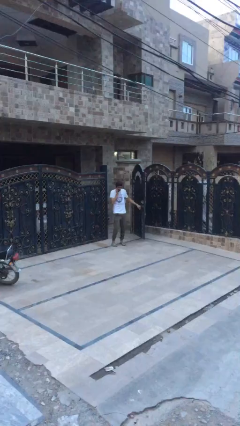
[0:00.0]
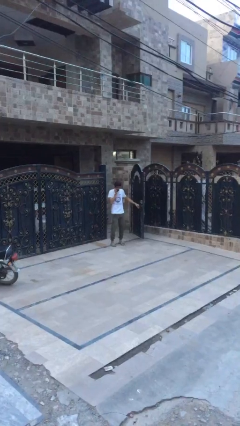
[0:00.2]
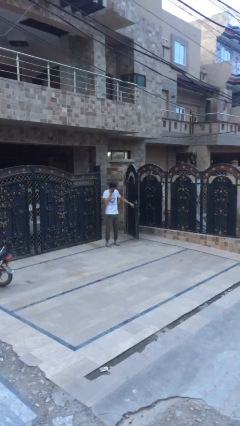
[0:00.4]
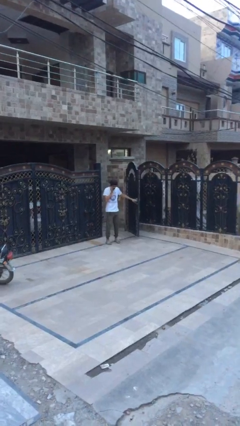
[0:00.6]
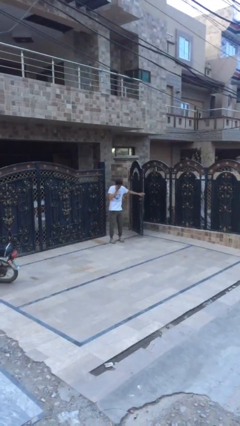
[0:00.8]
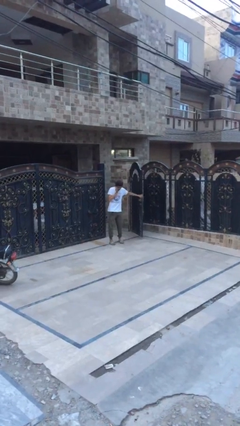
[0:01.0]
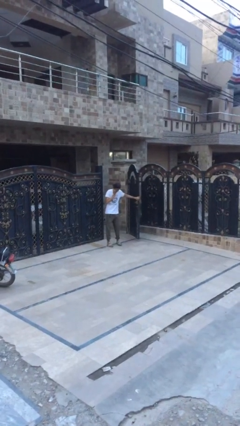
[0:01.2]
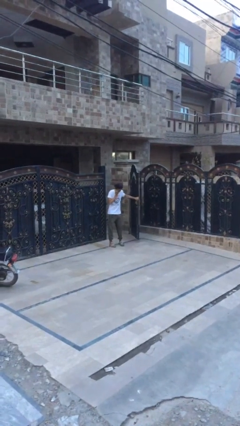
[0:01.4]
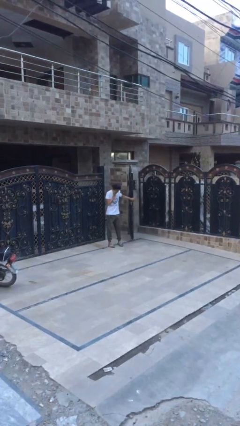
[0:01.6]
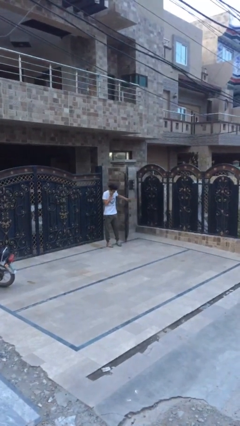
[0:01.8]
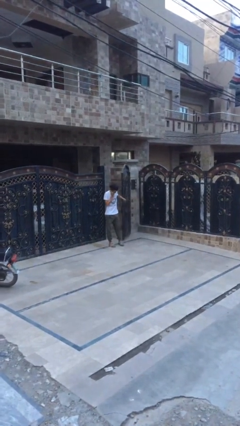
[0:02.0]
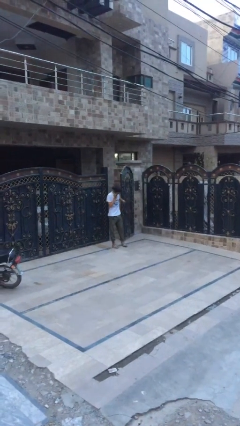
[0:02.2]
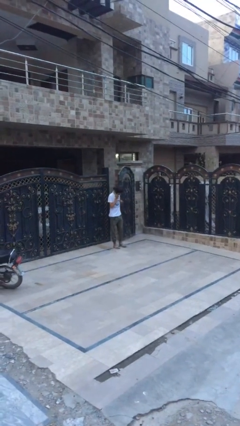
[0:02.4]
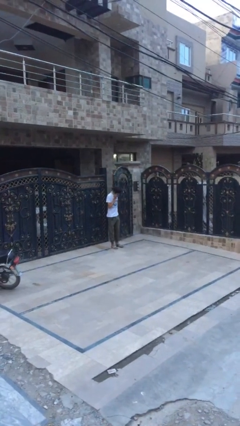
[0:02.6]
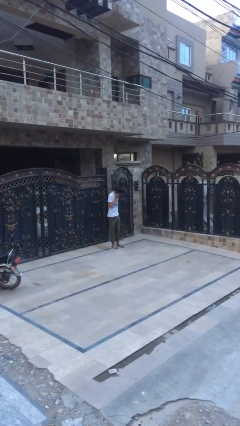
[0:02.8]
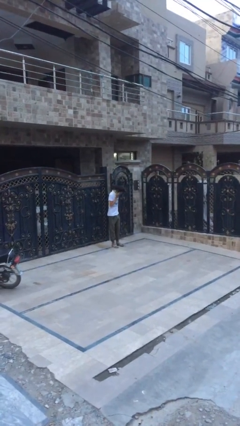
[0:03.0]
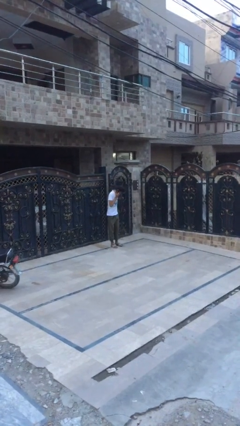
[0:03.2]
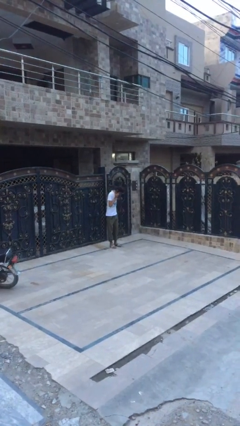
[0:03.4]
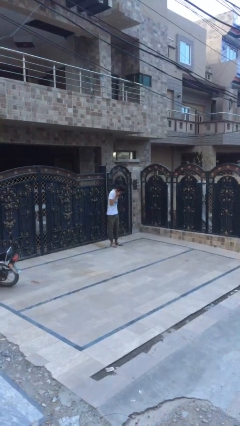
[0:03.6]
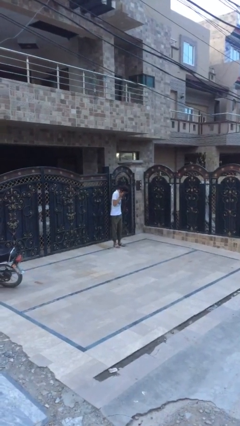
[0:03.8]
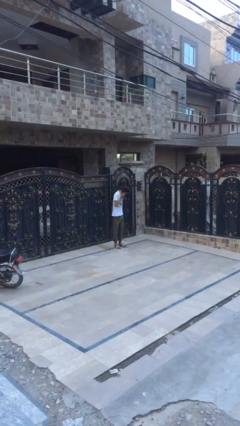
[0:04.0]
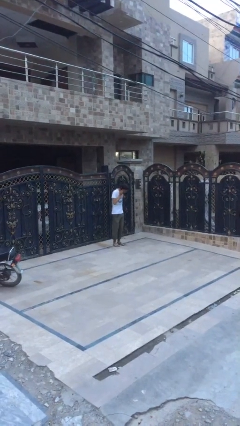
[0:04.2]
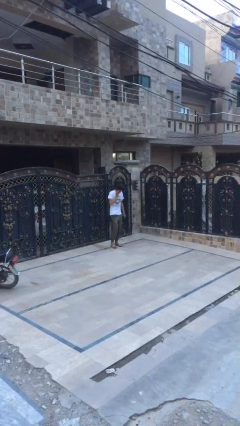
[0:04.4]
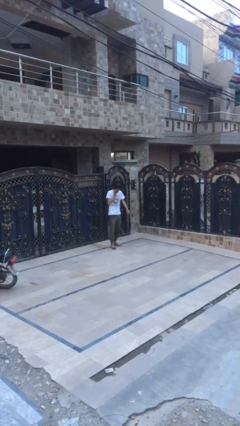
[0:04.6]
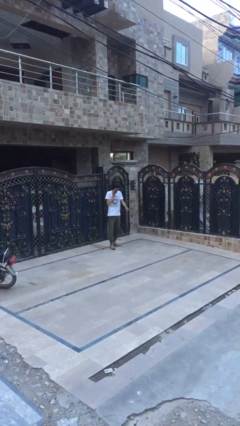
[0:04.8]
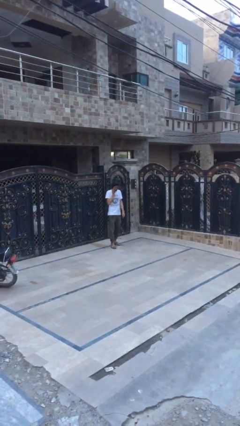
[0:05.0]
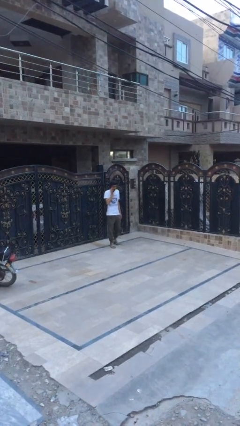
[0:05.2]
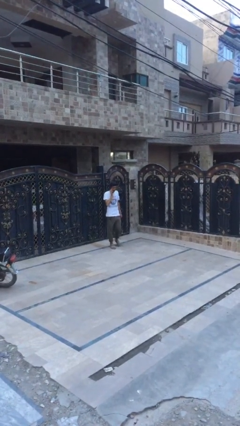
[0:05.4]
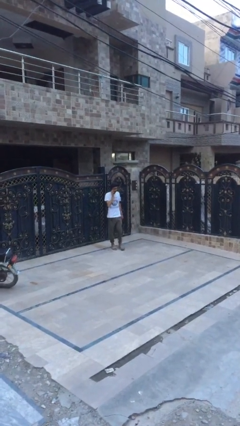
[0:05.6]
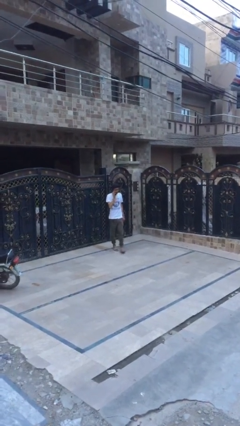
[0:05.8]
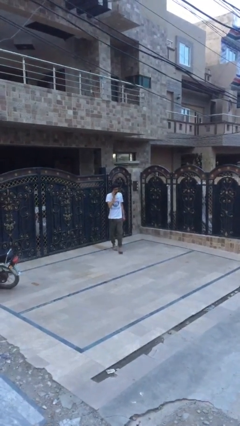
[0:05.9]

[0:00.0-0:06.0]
person closes facility door

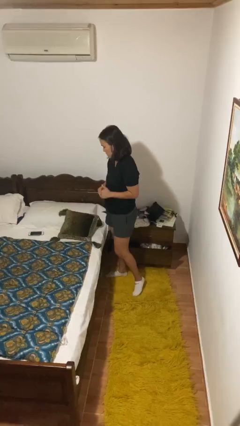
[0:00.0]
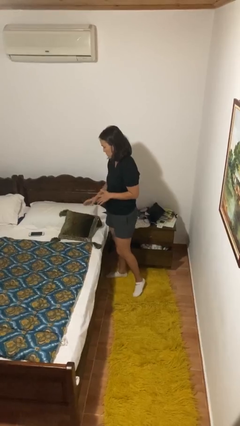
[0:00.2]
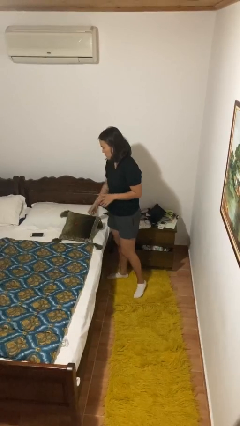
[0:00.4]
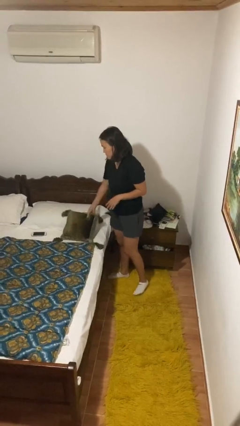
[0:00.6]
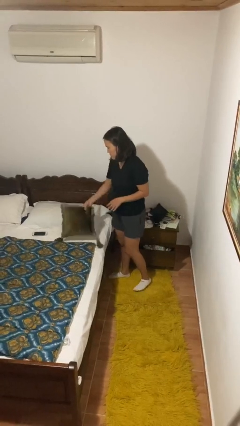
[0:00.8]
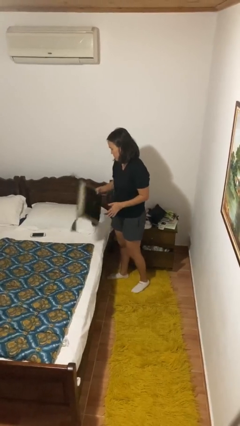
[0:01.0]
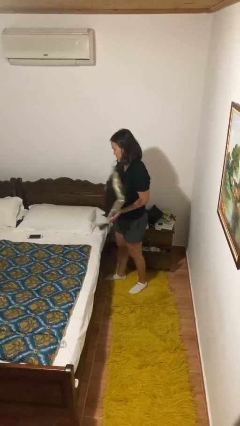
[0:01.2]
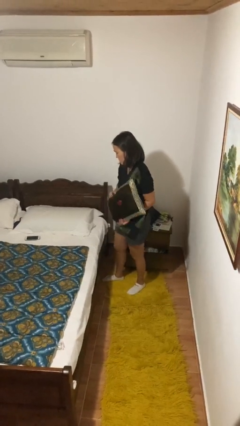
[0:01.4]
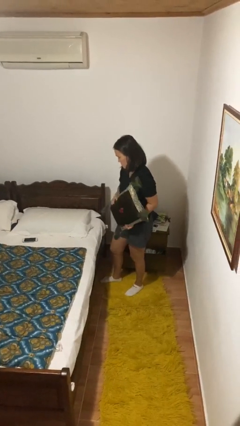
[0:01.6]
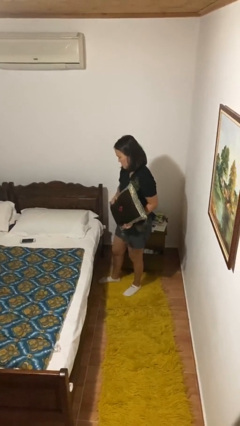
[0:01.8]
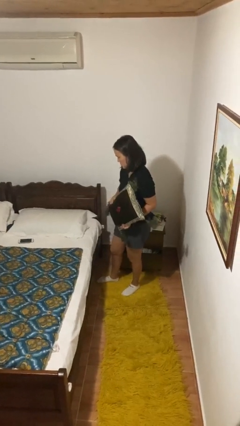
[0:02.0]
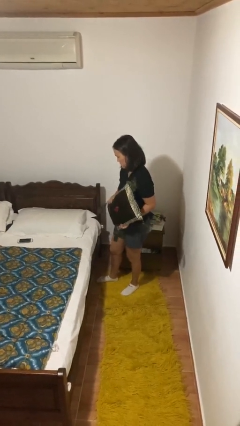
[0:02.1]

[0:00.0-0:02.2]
person picks up object from bed

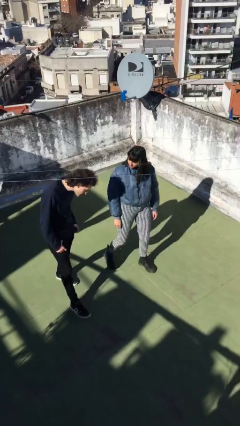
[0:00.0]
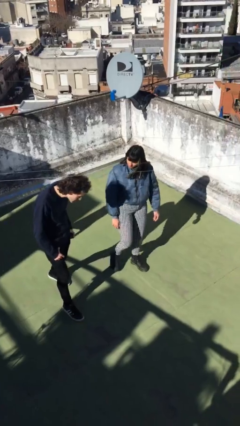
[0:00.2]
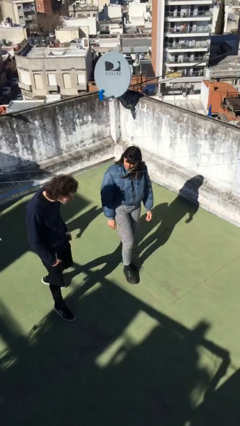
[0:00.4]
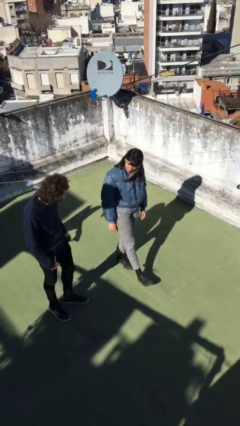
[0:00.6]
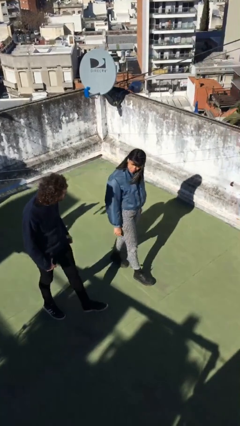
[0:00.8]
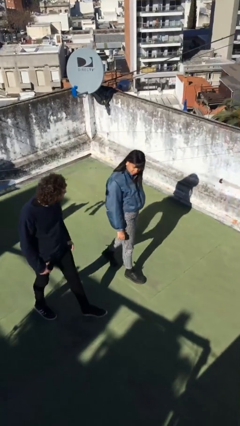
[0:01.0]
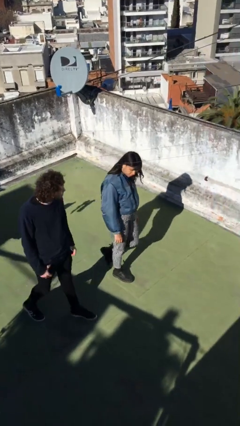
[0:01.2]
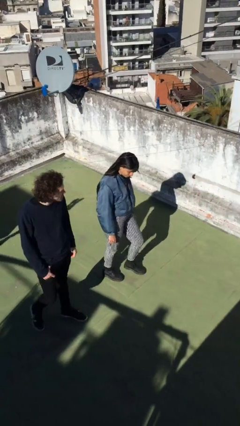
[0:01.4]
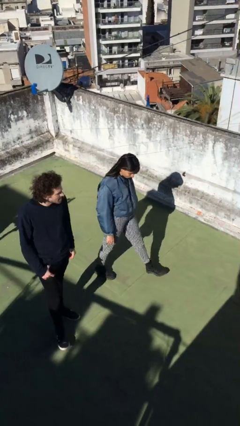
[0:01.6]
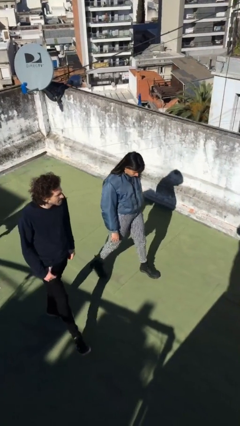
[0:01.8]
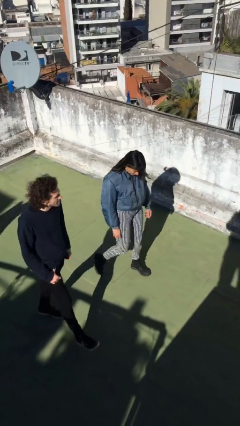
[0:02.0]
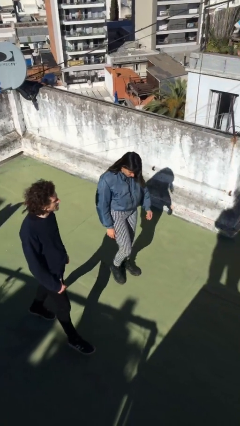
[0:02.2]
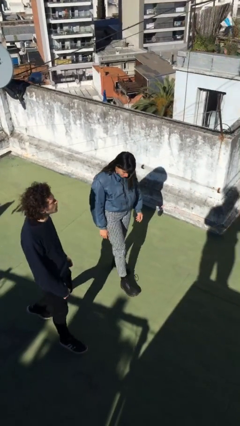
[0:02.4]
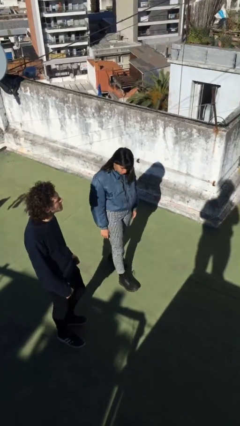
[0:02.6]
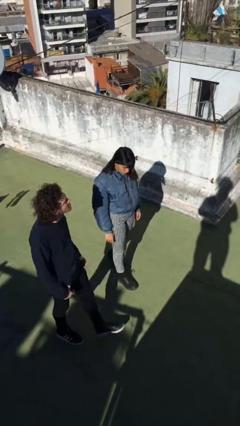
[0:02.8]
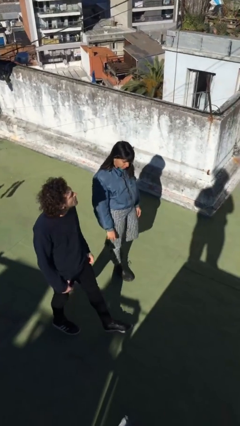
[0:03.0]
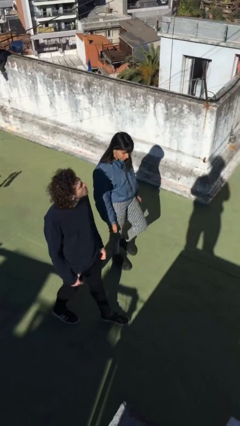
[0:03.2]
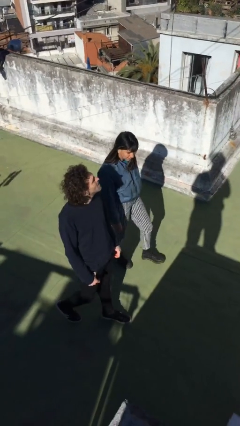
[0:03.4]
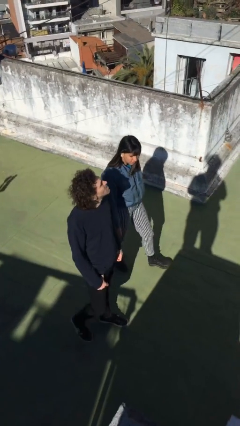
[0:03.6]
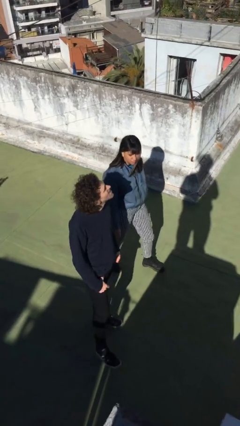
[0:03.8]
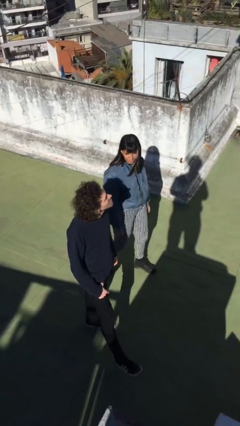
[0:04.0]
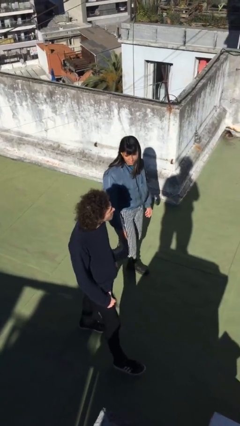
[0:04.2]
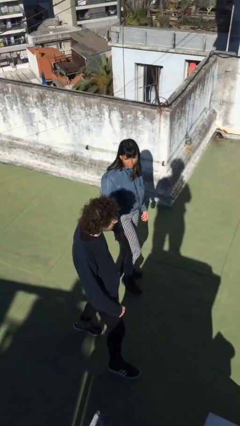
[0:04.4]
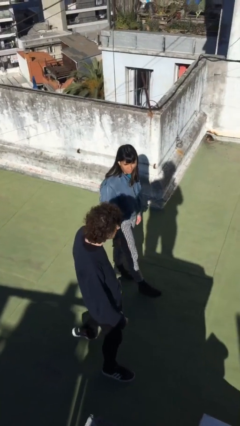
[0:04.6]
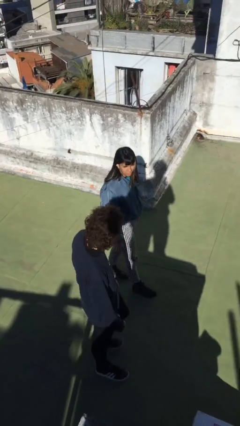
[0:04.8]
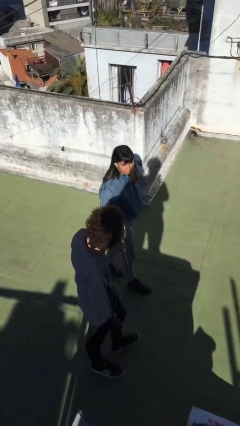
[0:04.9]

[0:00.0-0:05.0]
person talks to person

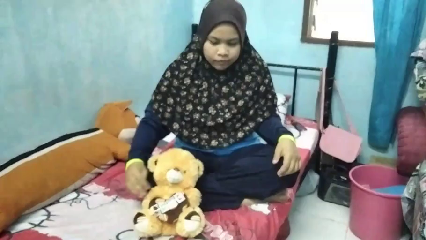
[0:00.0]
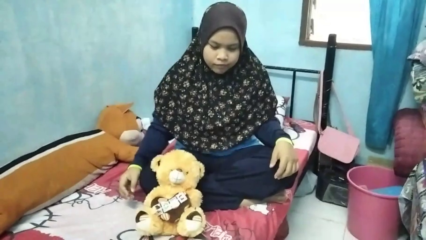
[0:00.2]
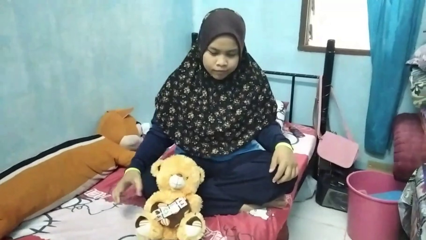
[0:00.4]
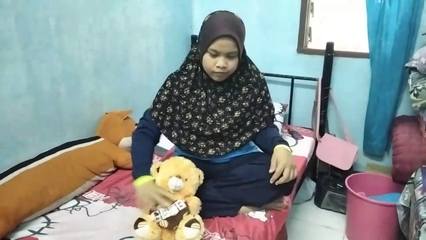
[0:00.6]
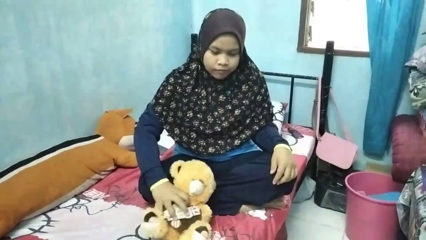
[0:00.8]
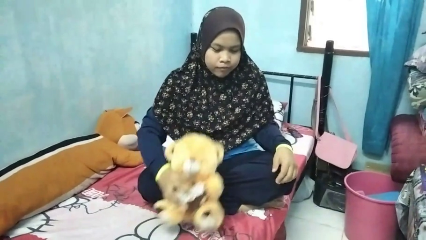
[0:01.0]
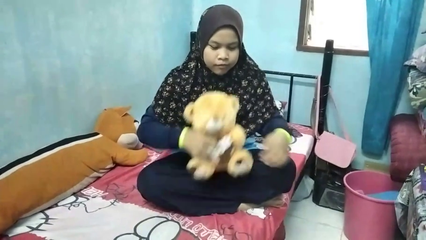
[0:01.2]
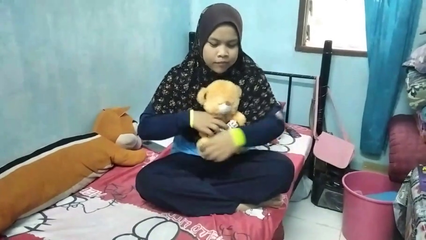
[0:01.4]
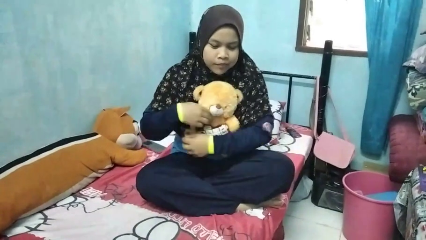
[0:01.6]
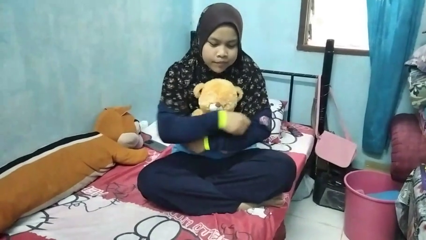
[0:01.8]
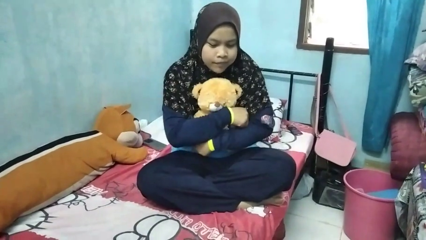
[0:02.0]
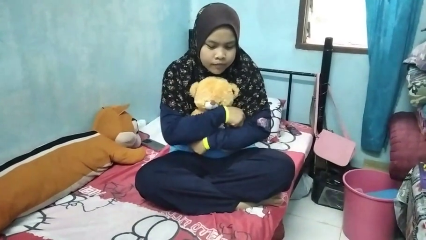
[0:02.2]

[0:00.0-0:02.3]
person hugs stuffed animal

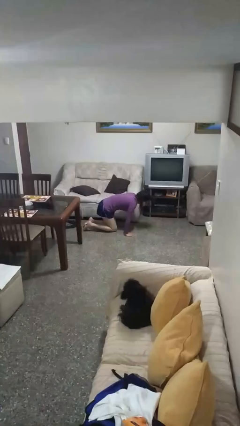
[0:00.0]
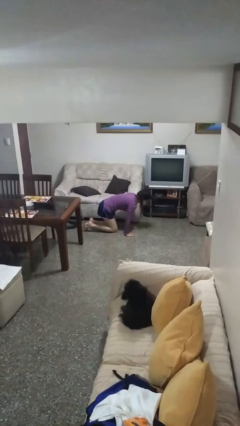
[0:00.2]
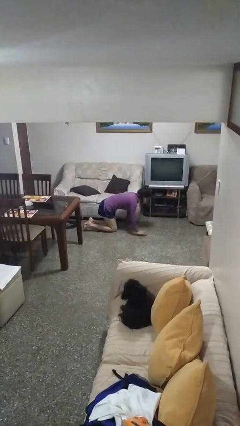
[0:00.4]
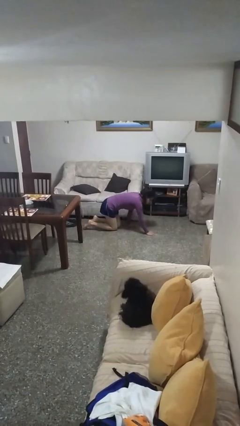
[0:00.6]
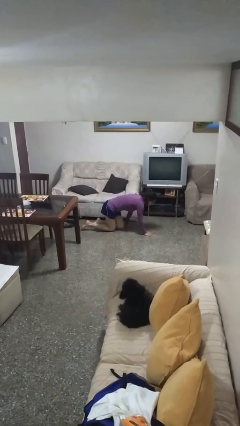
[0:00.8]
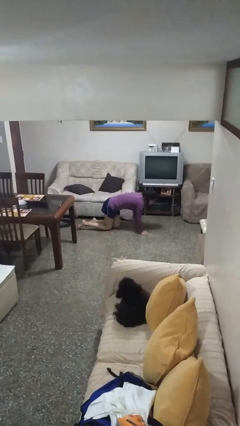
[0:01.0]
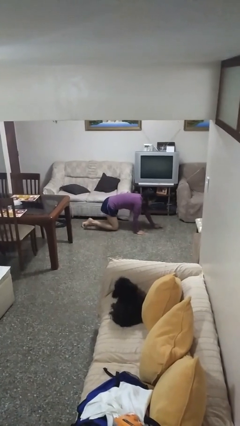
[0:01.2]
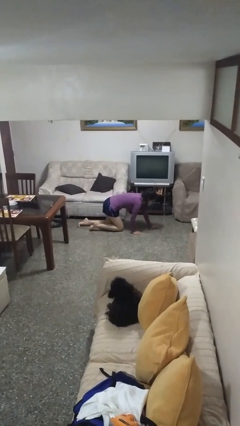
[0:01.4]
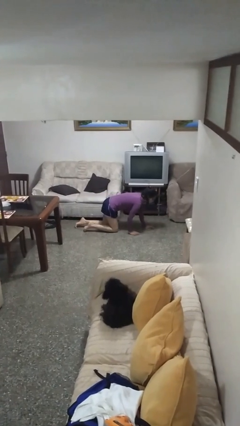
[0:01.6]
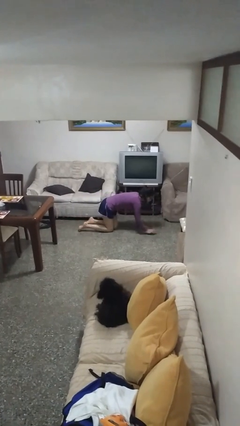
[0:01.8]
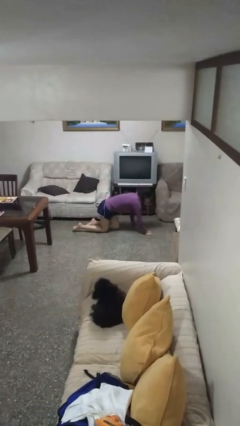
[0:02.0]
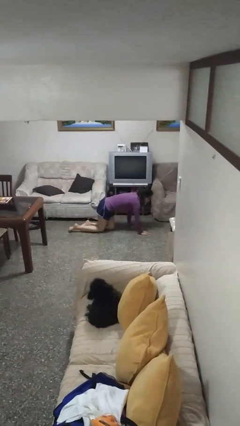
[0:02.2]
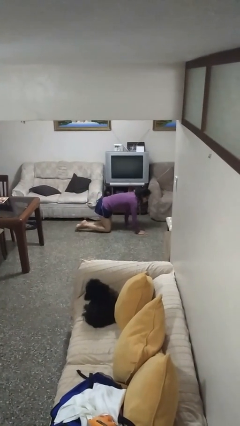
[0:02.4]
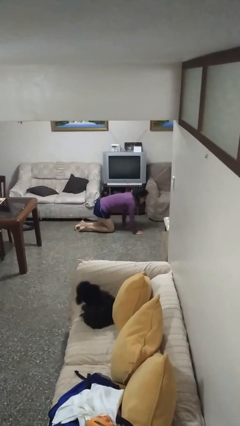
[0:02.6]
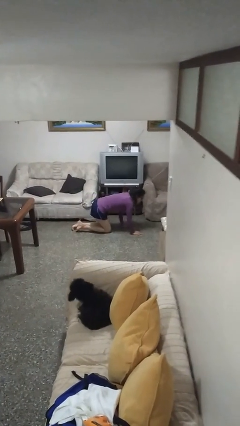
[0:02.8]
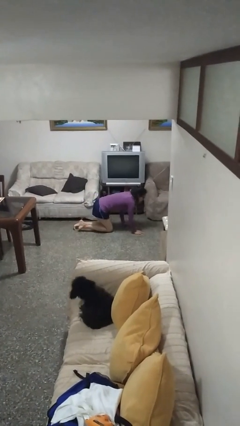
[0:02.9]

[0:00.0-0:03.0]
person crawls
